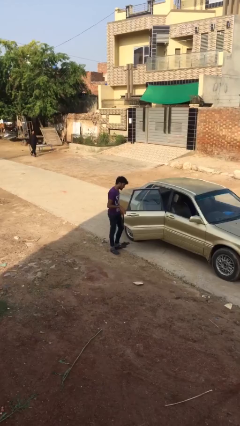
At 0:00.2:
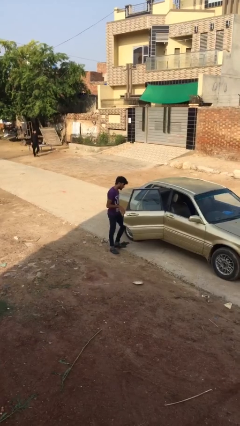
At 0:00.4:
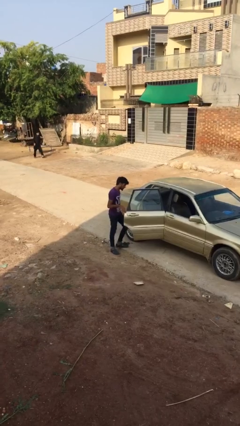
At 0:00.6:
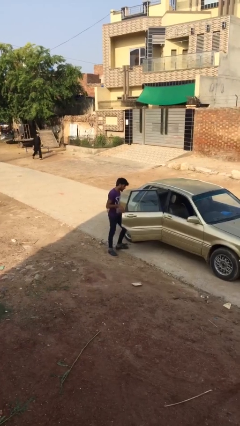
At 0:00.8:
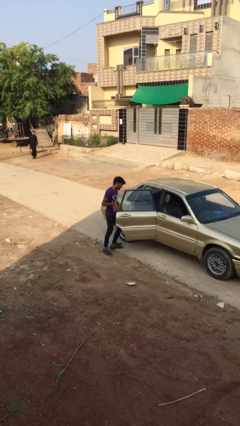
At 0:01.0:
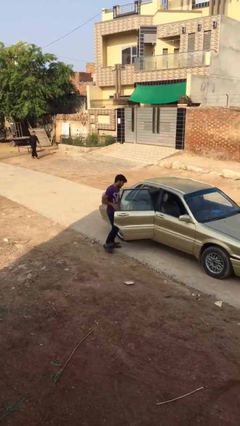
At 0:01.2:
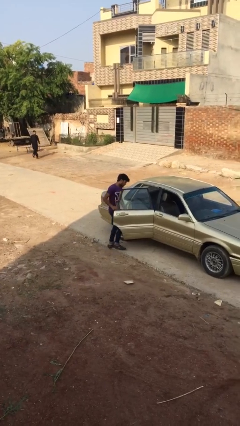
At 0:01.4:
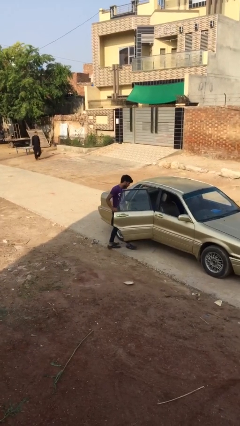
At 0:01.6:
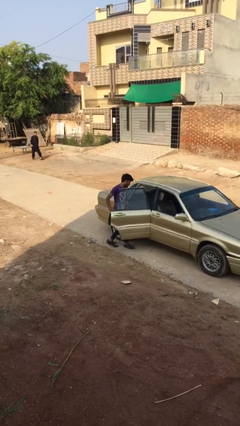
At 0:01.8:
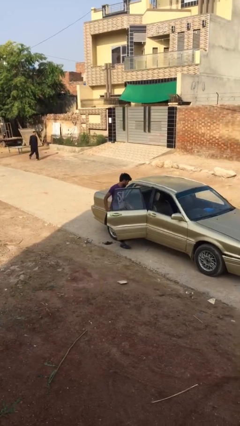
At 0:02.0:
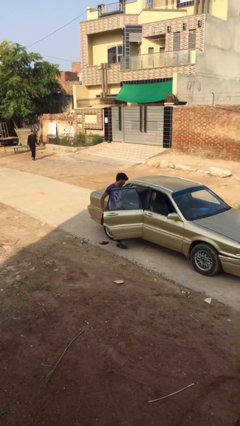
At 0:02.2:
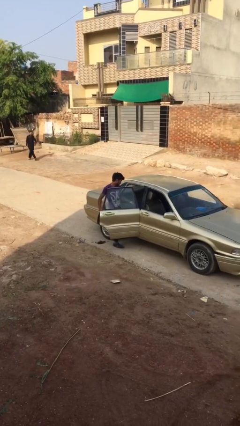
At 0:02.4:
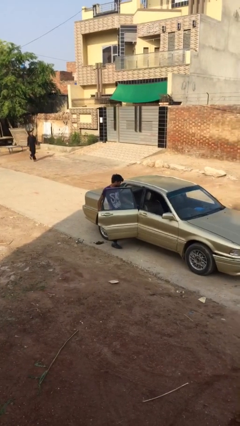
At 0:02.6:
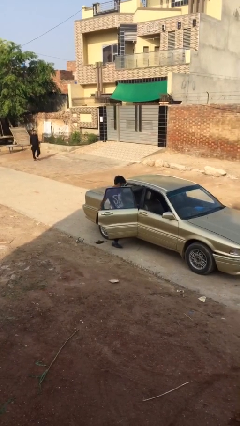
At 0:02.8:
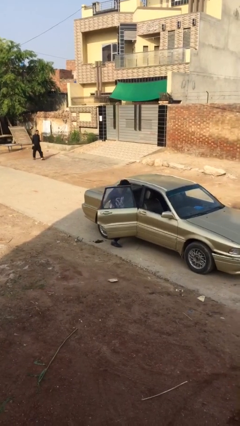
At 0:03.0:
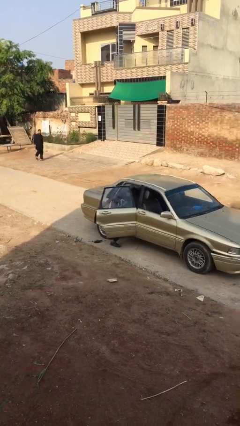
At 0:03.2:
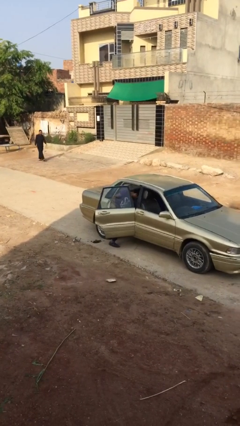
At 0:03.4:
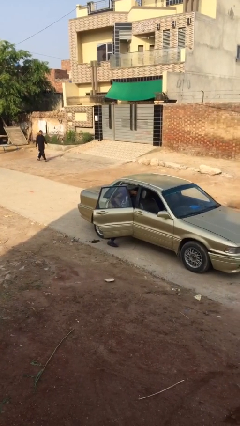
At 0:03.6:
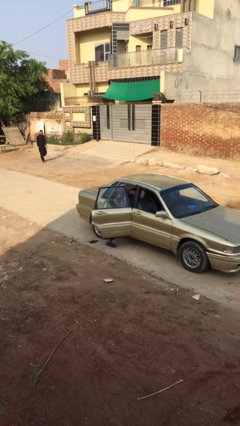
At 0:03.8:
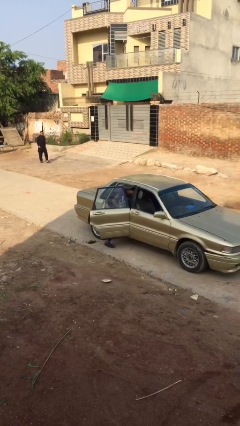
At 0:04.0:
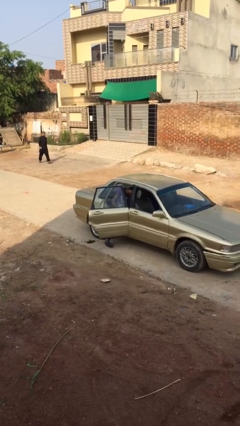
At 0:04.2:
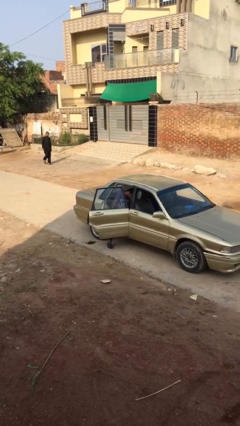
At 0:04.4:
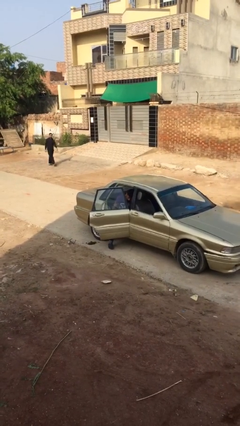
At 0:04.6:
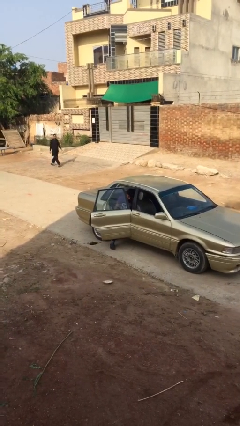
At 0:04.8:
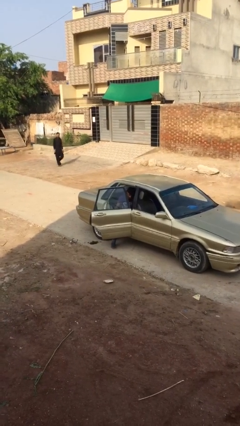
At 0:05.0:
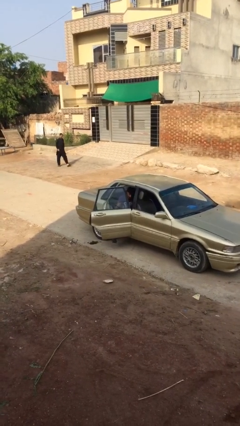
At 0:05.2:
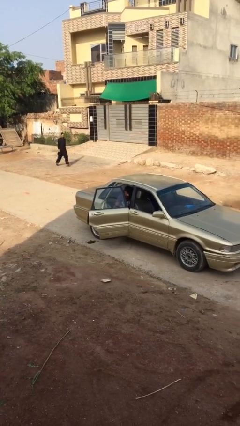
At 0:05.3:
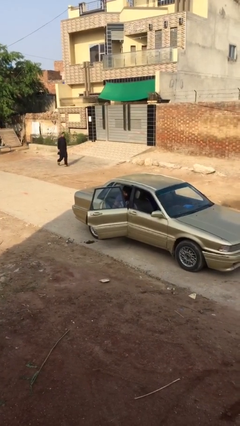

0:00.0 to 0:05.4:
person enters car

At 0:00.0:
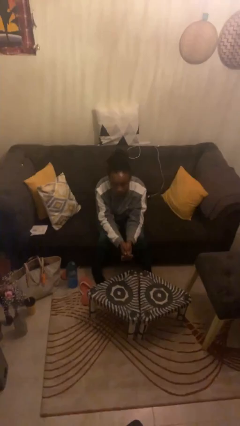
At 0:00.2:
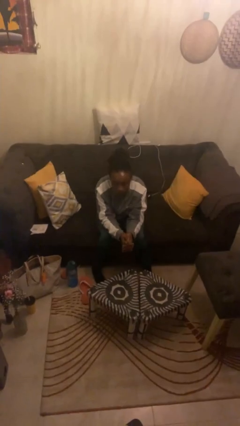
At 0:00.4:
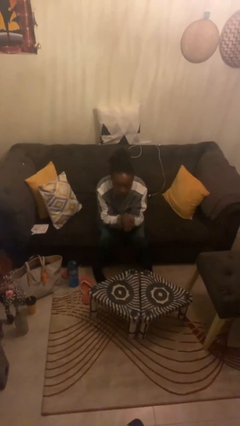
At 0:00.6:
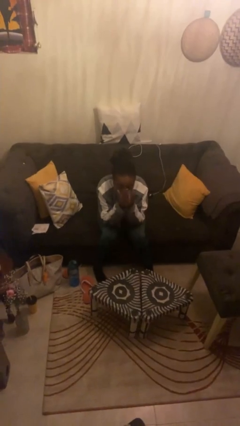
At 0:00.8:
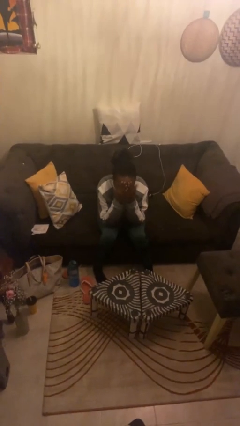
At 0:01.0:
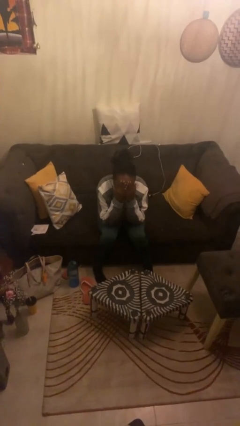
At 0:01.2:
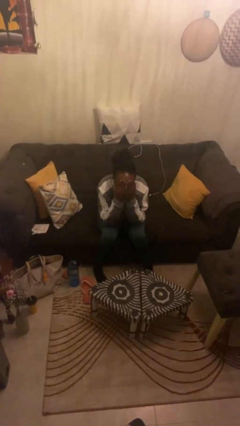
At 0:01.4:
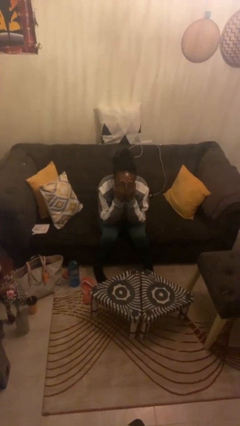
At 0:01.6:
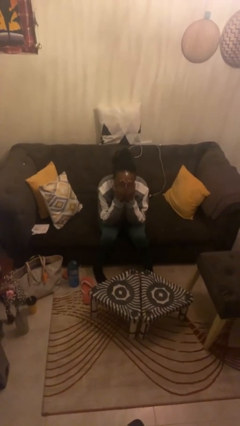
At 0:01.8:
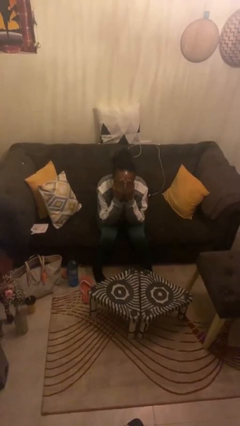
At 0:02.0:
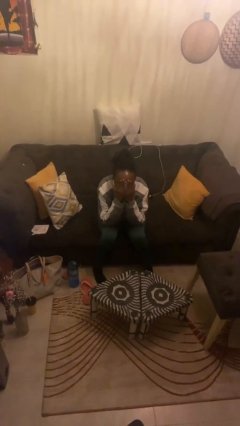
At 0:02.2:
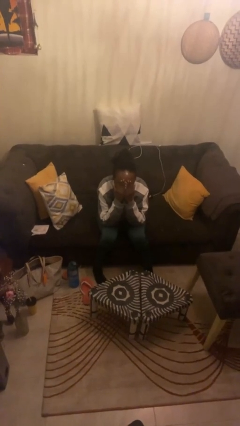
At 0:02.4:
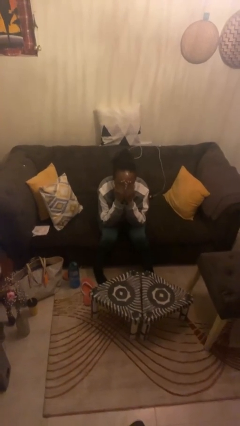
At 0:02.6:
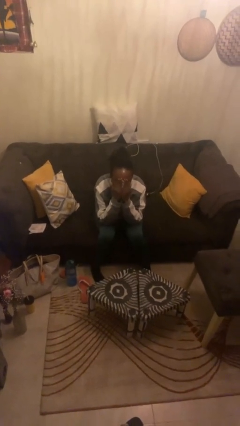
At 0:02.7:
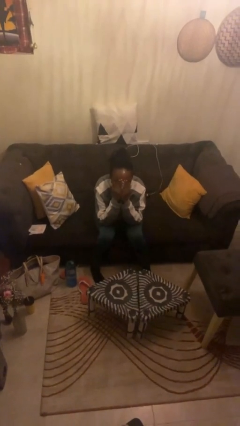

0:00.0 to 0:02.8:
person covers face with hands

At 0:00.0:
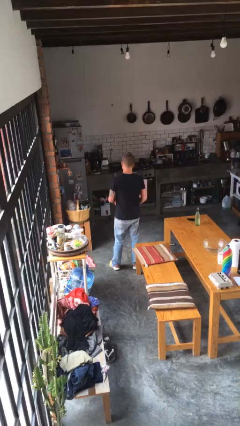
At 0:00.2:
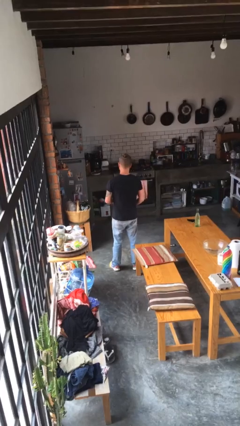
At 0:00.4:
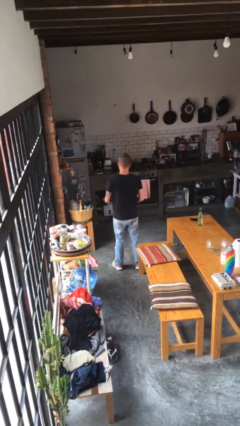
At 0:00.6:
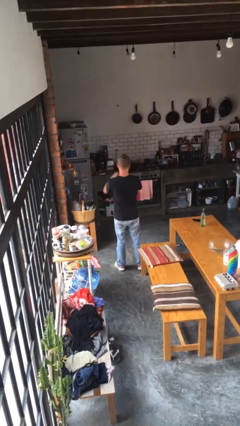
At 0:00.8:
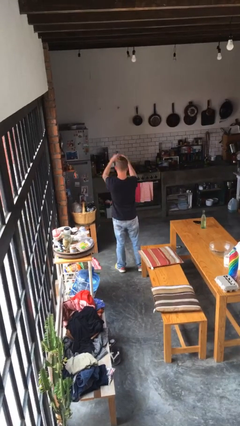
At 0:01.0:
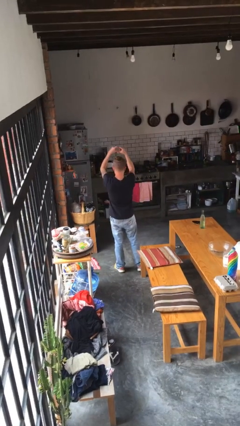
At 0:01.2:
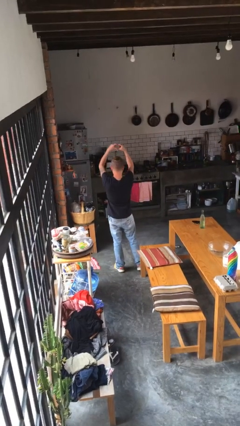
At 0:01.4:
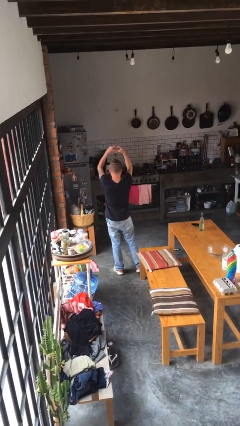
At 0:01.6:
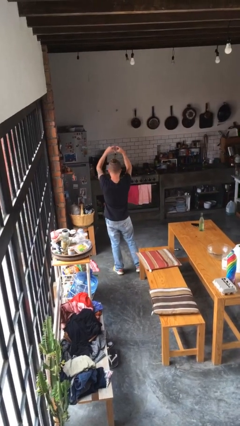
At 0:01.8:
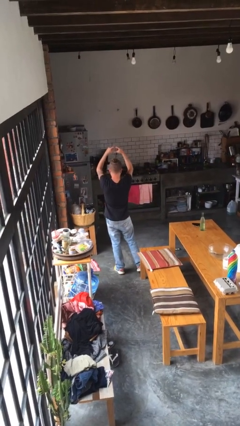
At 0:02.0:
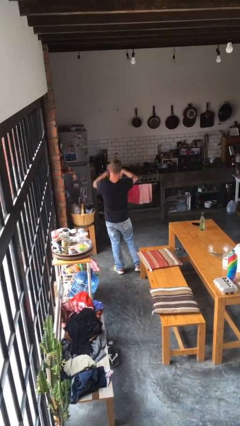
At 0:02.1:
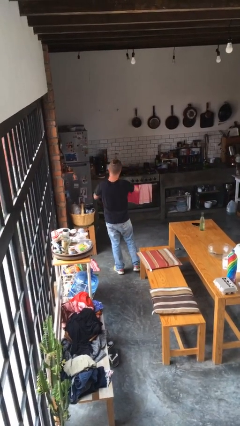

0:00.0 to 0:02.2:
person gestures heart

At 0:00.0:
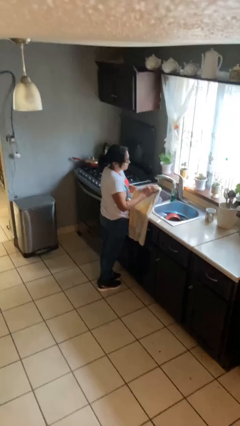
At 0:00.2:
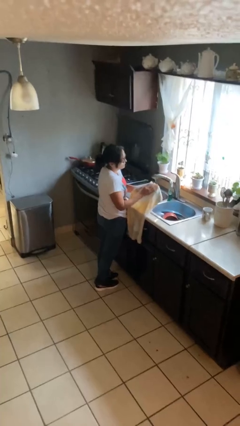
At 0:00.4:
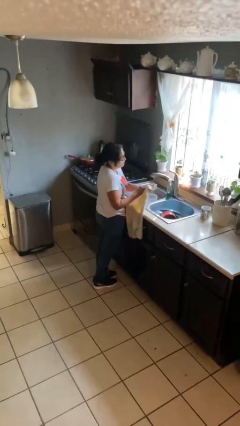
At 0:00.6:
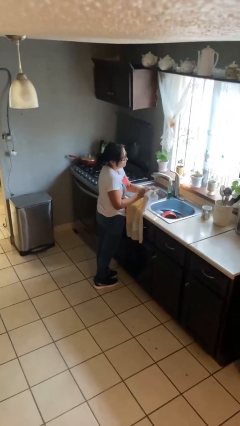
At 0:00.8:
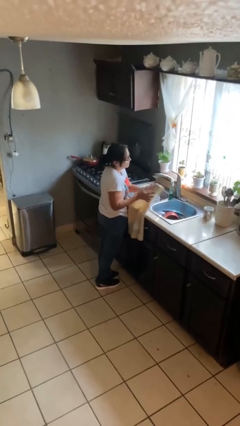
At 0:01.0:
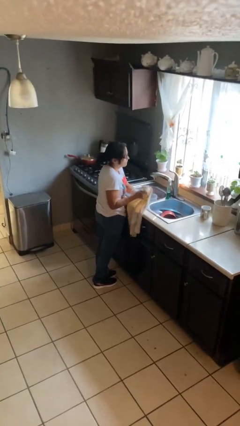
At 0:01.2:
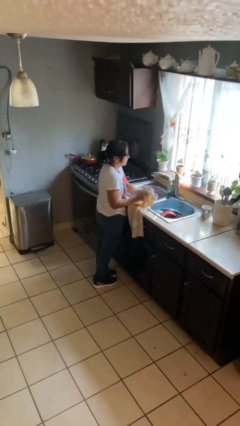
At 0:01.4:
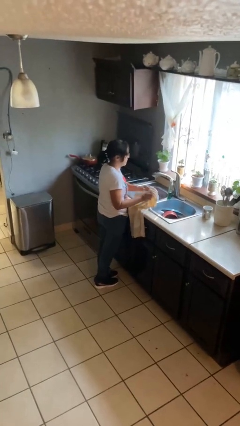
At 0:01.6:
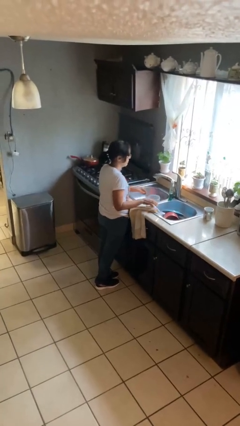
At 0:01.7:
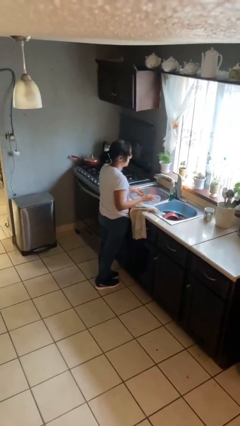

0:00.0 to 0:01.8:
person dries hands with towel

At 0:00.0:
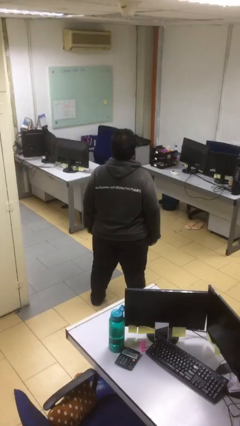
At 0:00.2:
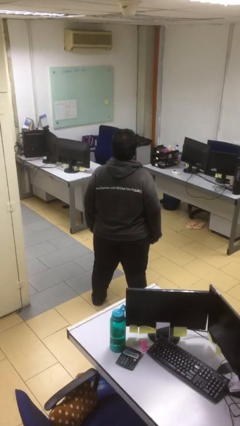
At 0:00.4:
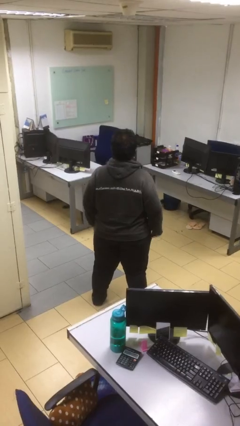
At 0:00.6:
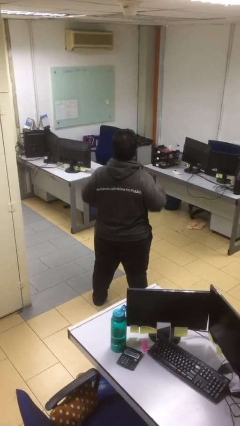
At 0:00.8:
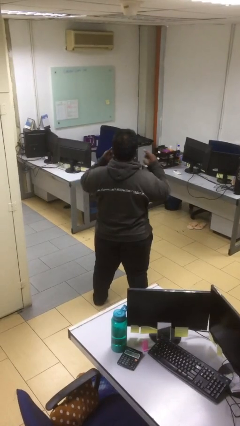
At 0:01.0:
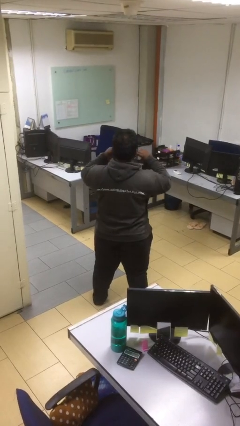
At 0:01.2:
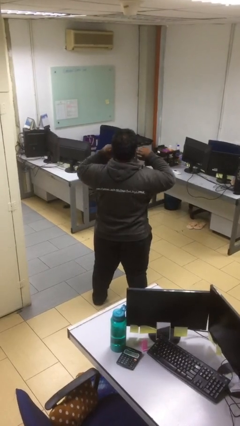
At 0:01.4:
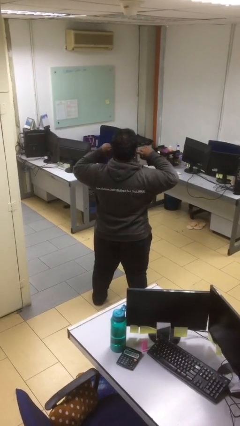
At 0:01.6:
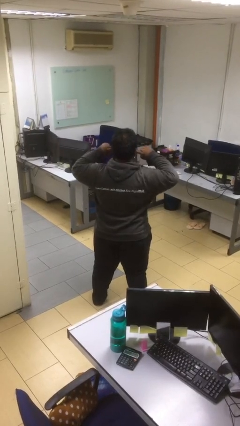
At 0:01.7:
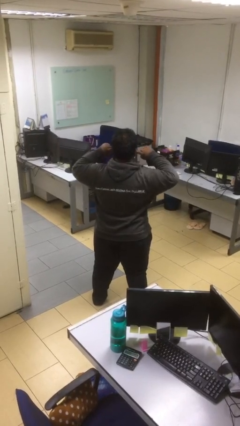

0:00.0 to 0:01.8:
person puts fingers in ear

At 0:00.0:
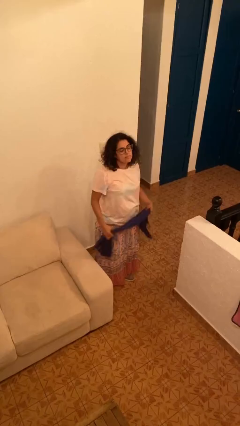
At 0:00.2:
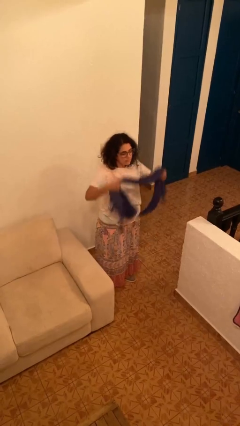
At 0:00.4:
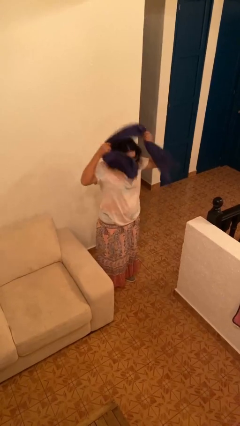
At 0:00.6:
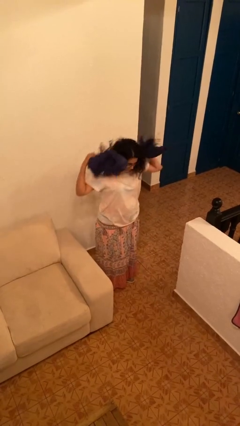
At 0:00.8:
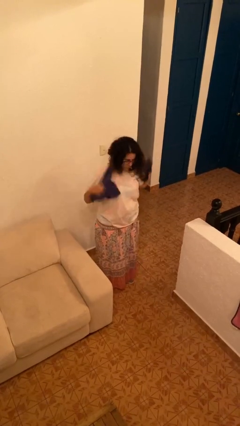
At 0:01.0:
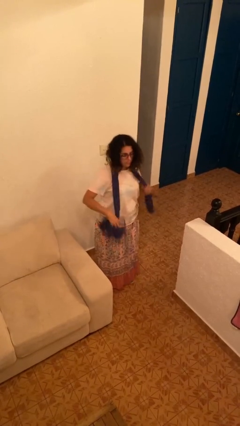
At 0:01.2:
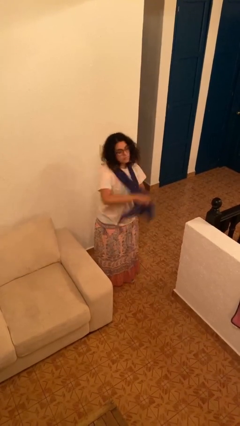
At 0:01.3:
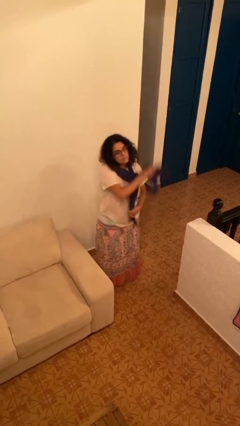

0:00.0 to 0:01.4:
person puts on scarf

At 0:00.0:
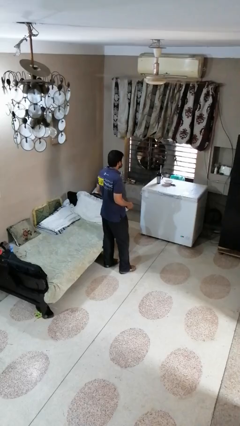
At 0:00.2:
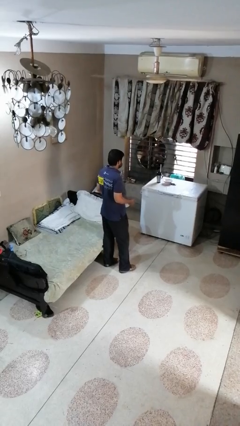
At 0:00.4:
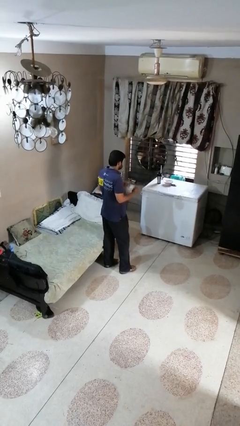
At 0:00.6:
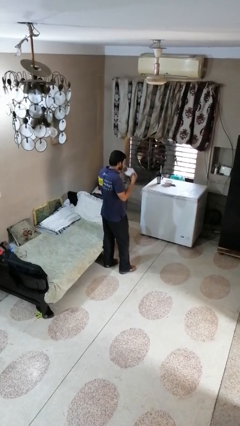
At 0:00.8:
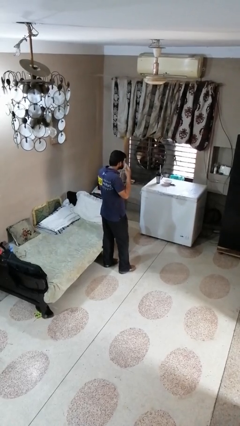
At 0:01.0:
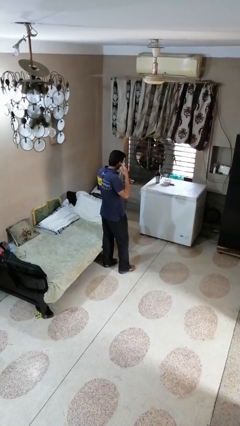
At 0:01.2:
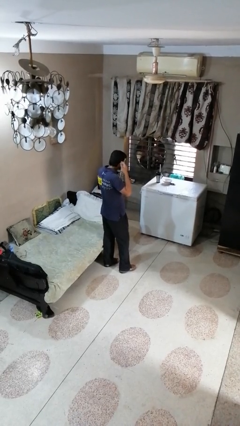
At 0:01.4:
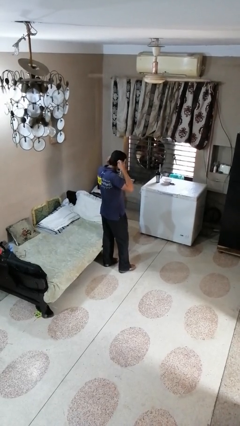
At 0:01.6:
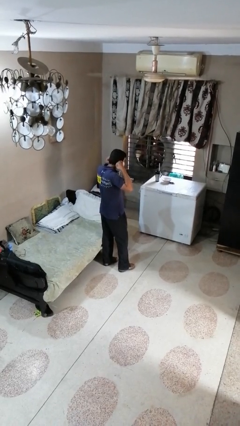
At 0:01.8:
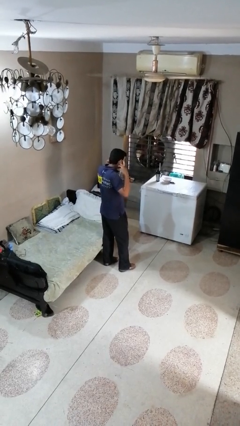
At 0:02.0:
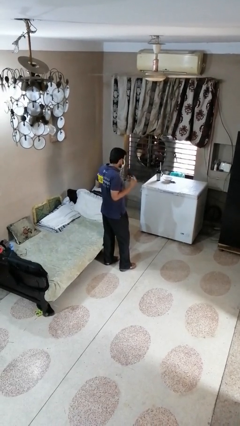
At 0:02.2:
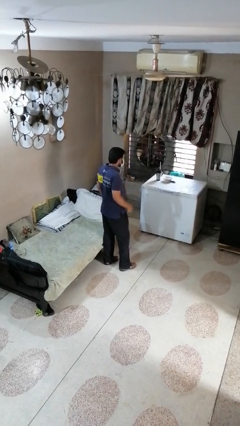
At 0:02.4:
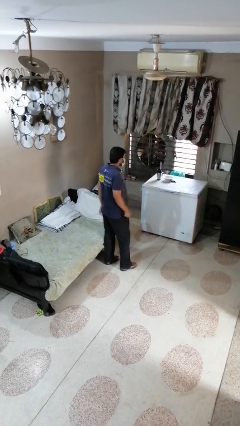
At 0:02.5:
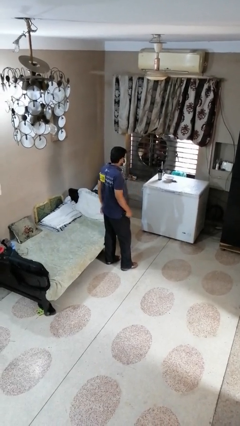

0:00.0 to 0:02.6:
person puts on facemask
